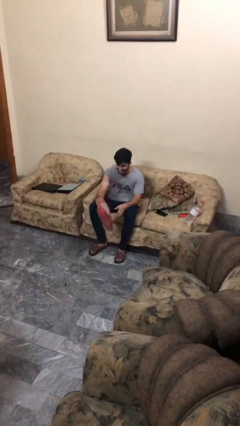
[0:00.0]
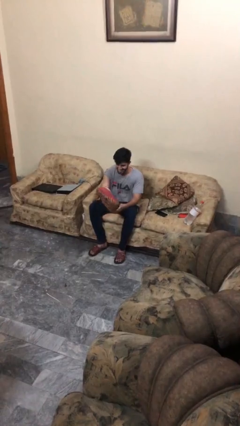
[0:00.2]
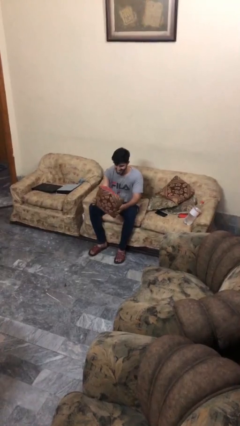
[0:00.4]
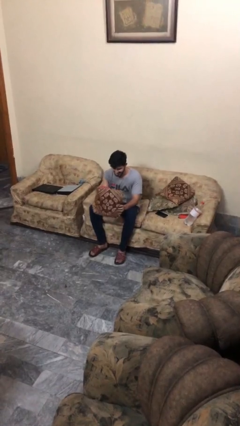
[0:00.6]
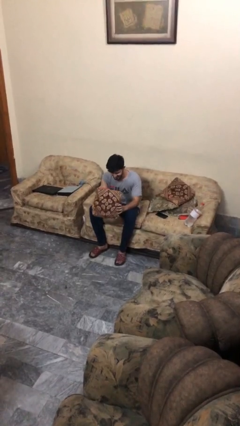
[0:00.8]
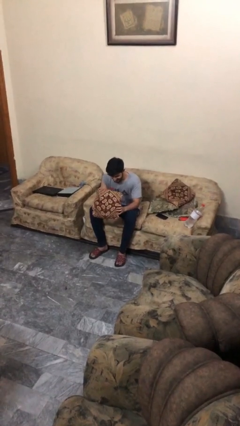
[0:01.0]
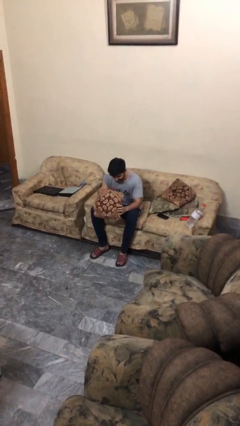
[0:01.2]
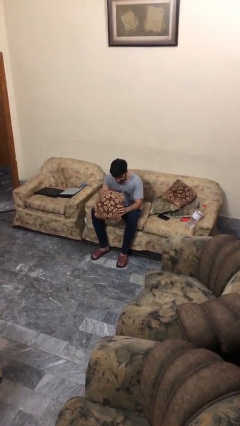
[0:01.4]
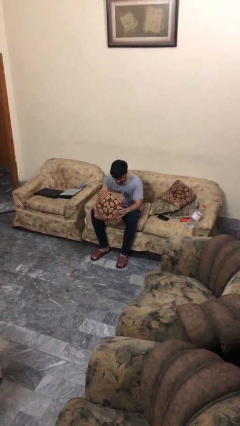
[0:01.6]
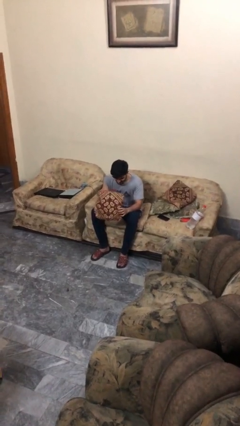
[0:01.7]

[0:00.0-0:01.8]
person picks up object from floor

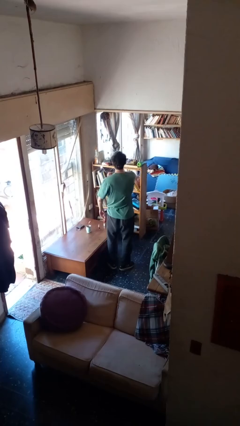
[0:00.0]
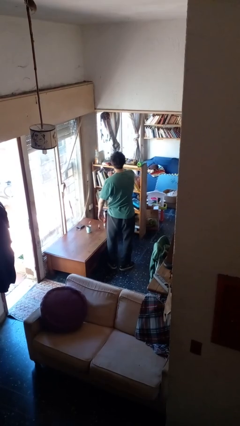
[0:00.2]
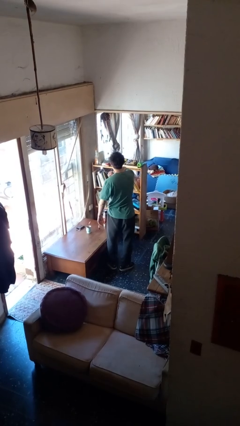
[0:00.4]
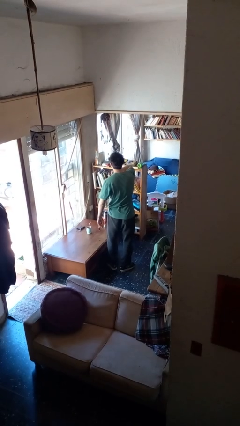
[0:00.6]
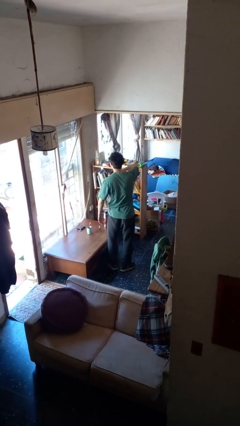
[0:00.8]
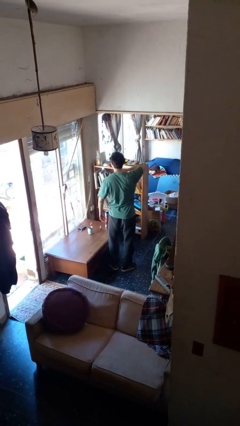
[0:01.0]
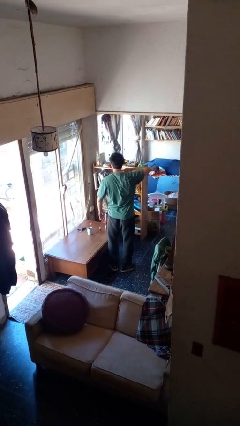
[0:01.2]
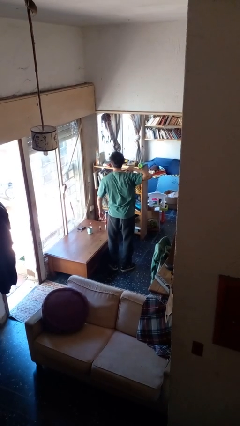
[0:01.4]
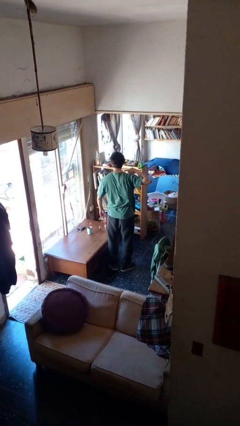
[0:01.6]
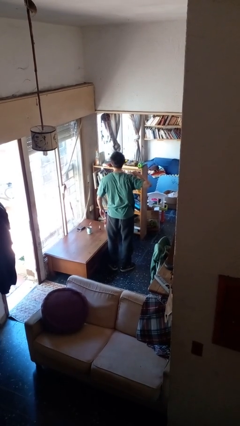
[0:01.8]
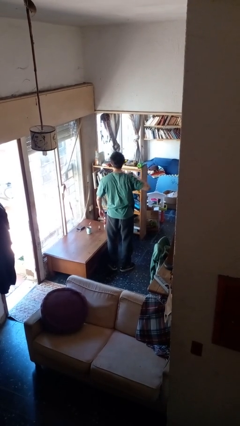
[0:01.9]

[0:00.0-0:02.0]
person gestures cut

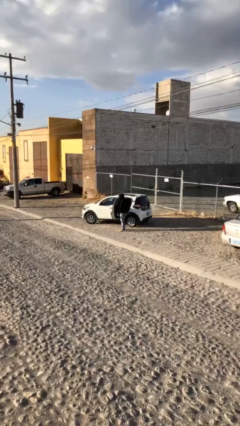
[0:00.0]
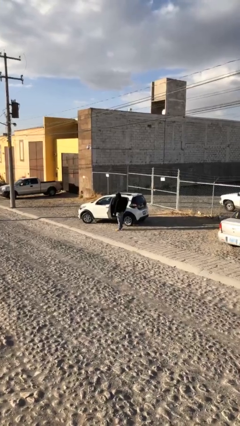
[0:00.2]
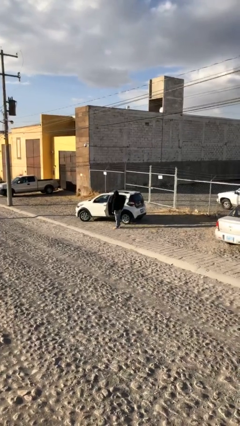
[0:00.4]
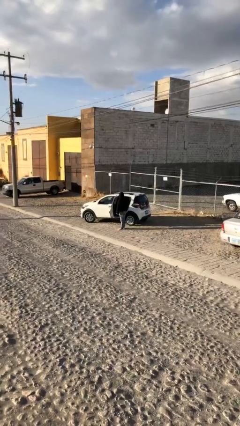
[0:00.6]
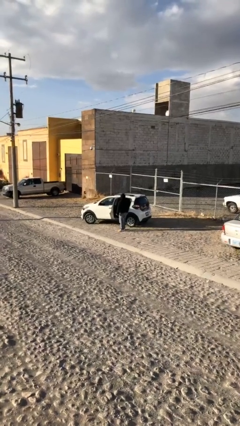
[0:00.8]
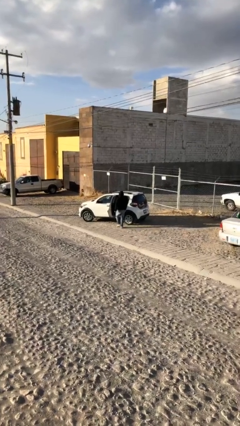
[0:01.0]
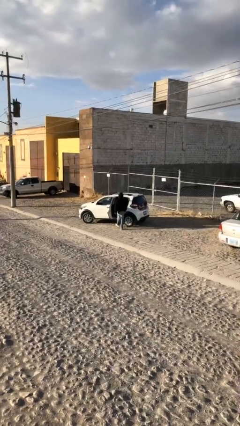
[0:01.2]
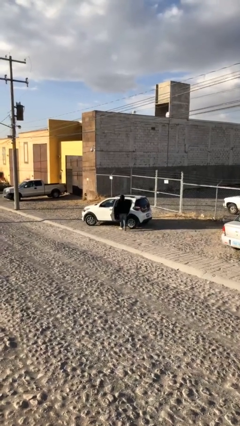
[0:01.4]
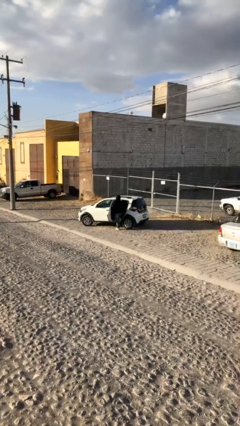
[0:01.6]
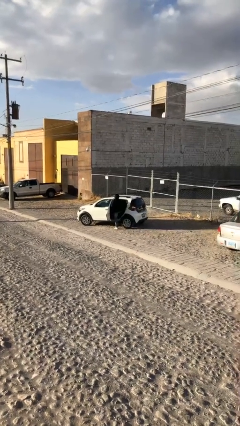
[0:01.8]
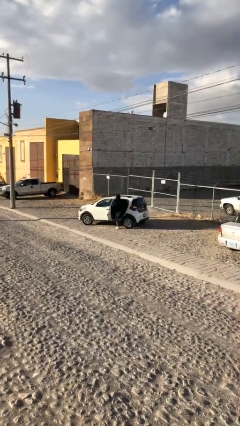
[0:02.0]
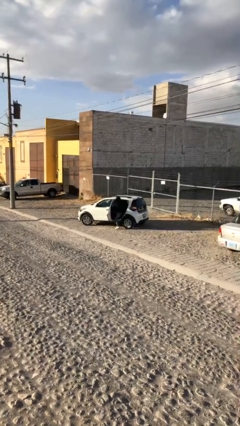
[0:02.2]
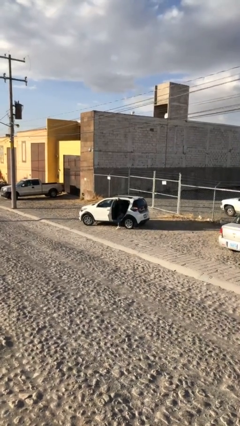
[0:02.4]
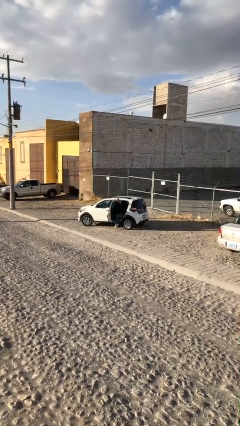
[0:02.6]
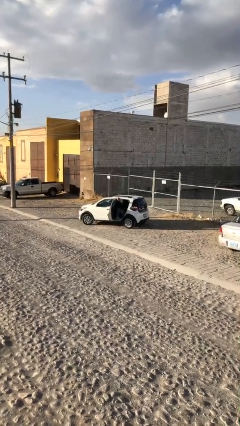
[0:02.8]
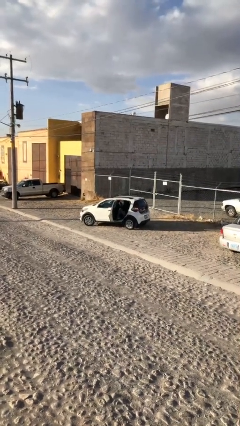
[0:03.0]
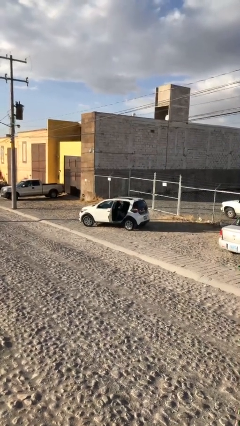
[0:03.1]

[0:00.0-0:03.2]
person enters car

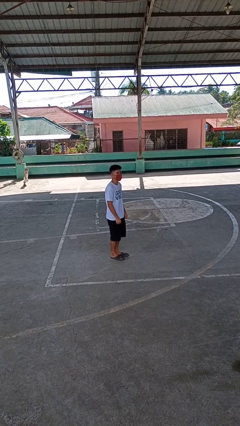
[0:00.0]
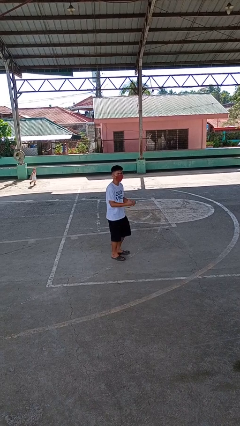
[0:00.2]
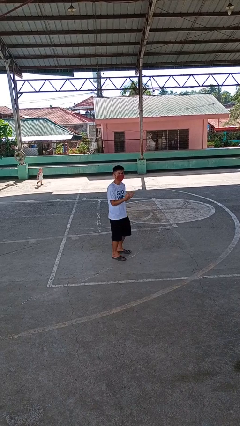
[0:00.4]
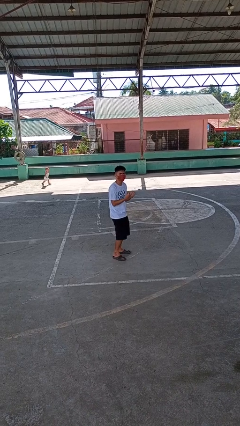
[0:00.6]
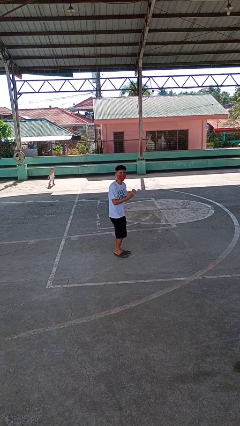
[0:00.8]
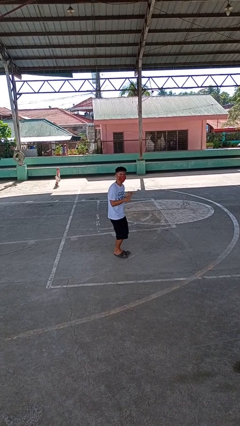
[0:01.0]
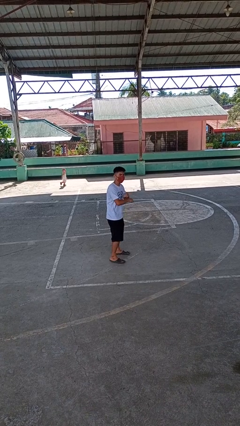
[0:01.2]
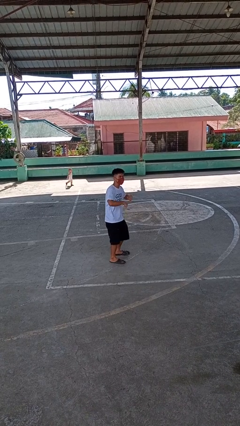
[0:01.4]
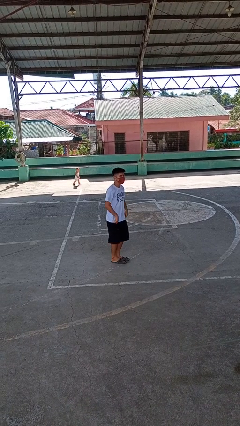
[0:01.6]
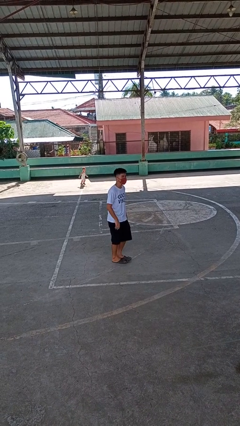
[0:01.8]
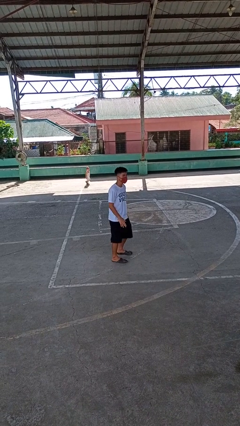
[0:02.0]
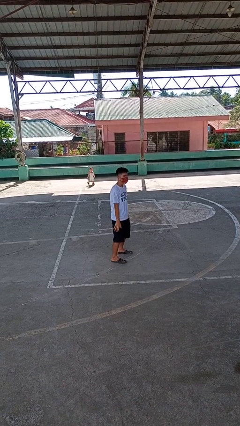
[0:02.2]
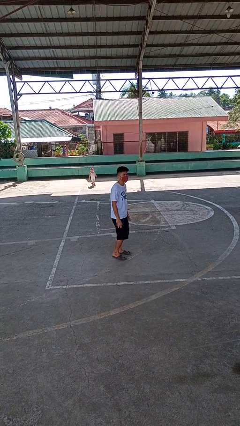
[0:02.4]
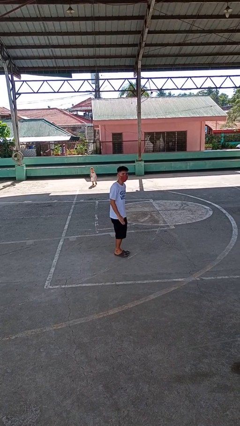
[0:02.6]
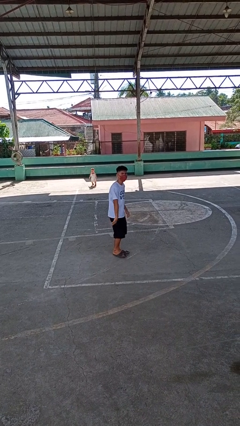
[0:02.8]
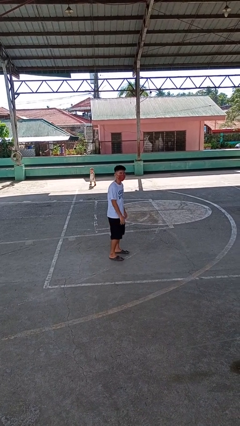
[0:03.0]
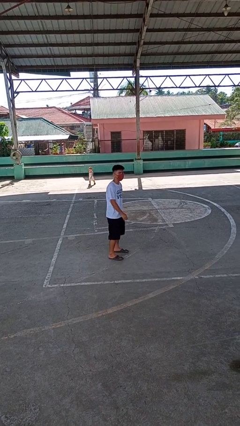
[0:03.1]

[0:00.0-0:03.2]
person dances in place

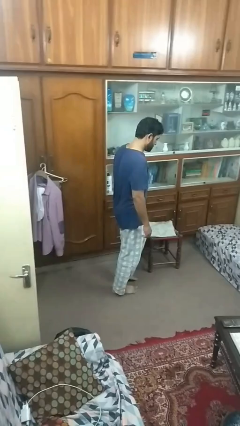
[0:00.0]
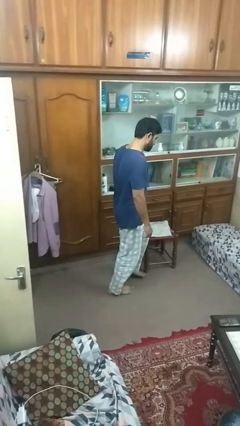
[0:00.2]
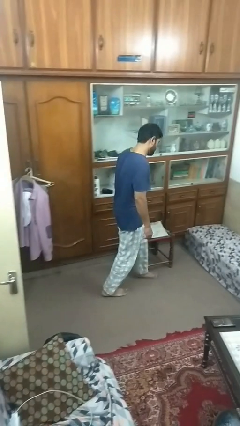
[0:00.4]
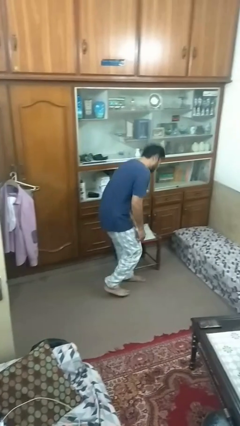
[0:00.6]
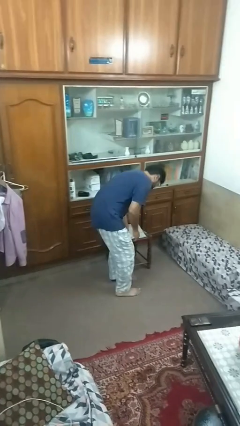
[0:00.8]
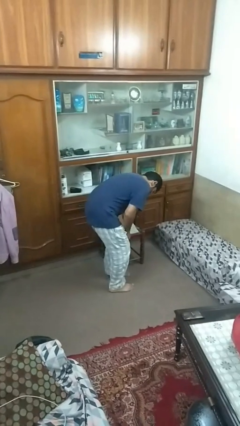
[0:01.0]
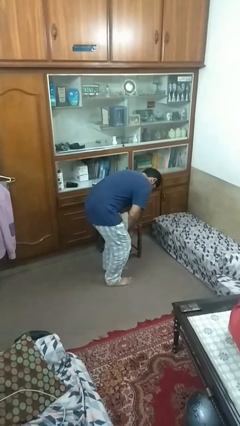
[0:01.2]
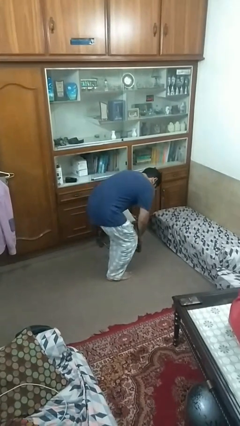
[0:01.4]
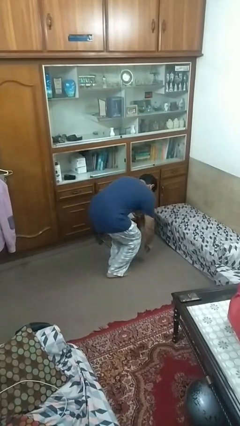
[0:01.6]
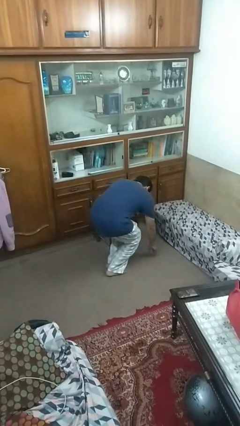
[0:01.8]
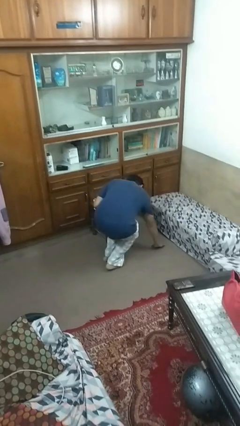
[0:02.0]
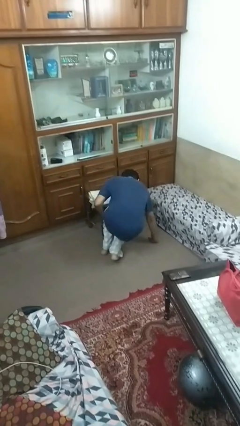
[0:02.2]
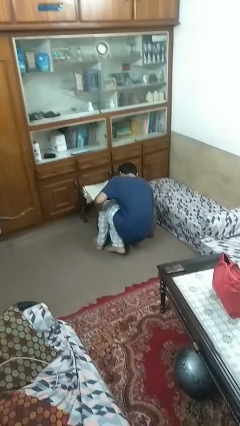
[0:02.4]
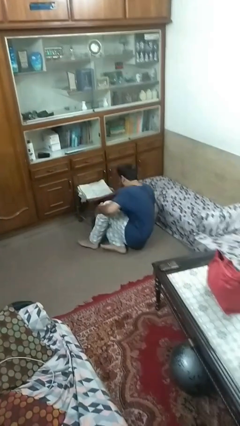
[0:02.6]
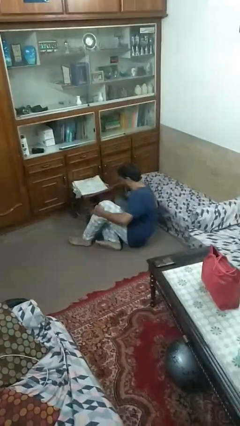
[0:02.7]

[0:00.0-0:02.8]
person trips on object on floor

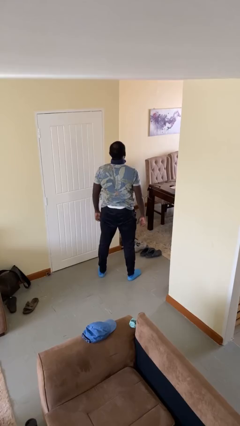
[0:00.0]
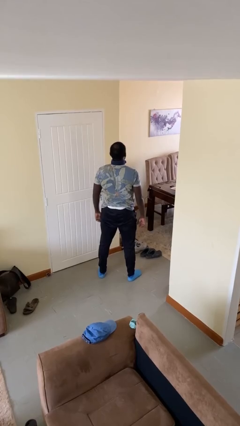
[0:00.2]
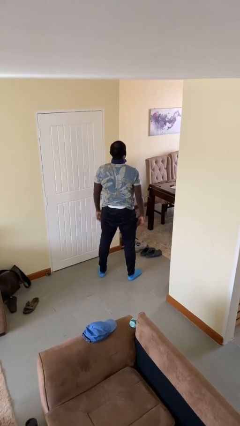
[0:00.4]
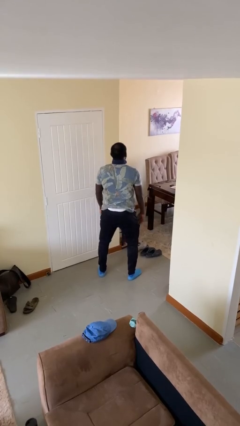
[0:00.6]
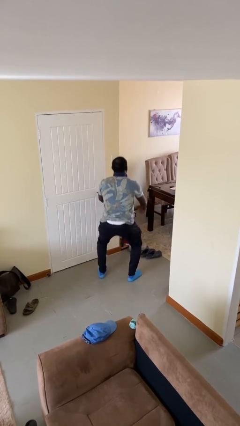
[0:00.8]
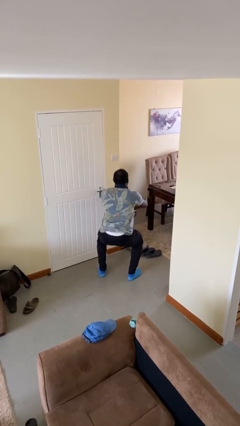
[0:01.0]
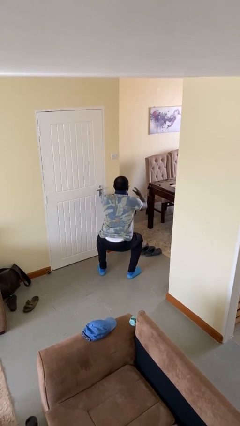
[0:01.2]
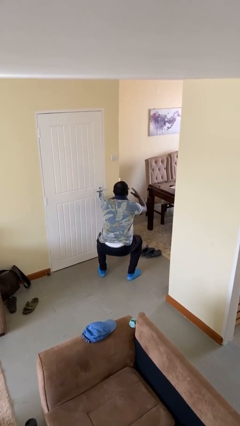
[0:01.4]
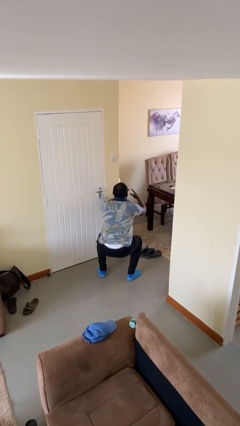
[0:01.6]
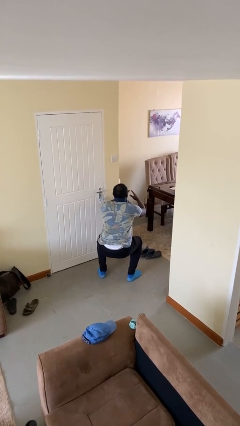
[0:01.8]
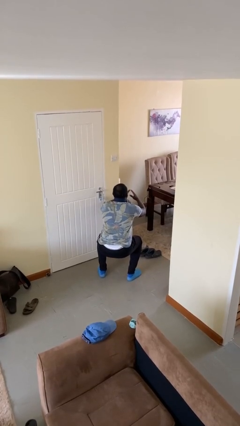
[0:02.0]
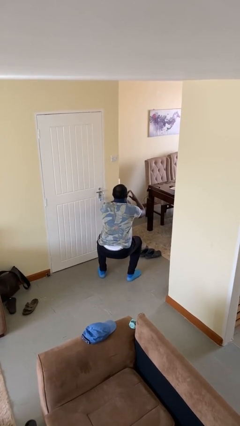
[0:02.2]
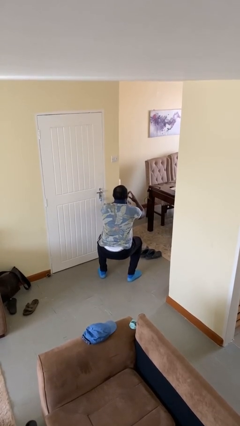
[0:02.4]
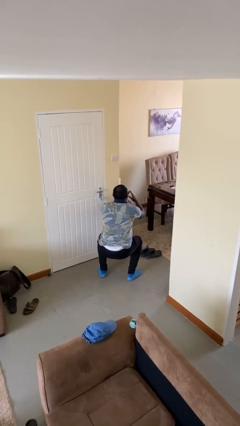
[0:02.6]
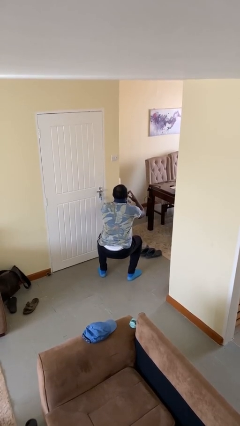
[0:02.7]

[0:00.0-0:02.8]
person squats

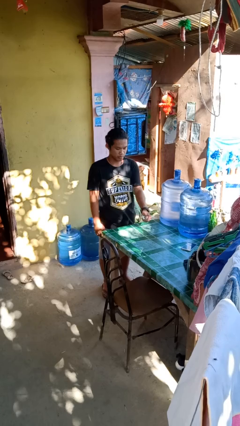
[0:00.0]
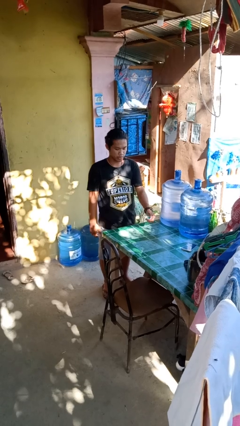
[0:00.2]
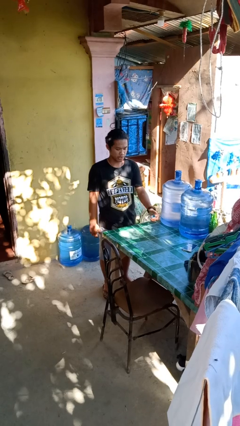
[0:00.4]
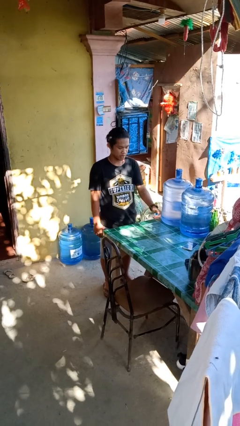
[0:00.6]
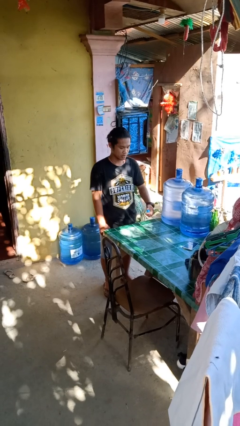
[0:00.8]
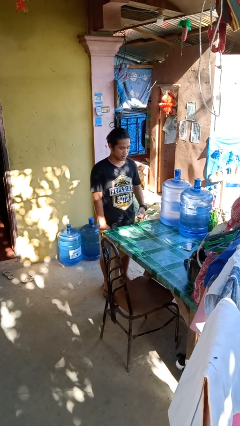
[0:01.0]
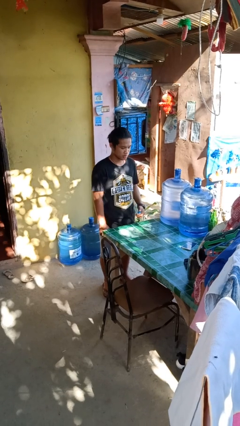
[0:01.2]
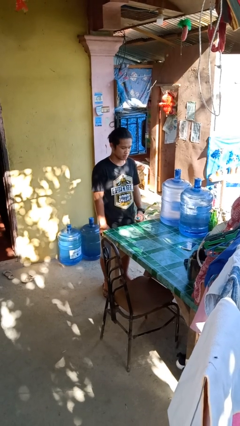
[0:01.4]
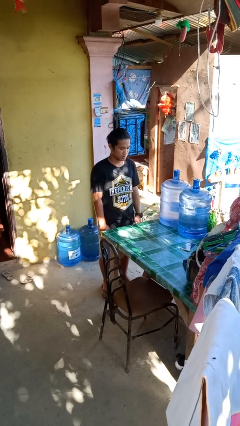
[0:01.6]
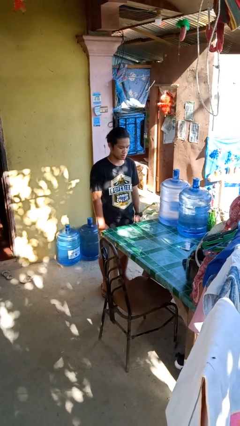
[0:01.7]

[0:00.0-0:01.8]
person sprays from bottle
